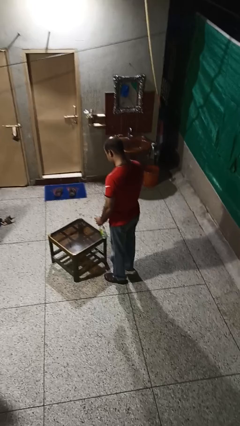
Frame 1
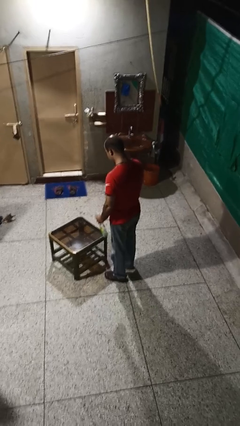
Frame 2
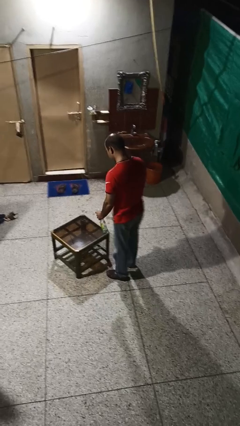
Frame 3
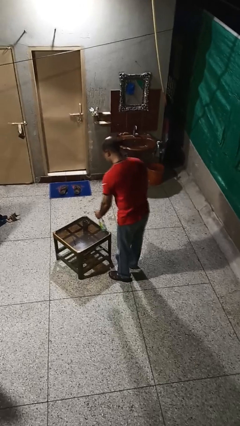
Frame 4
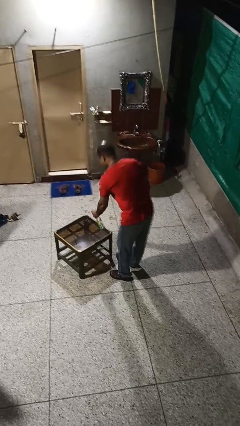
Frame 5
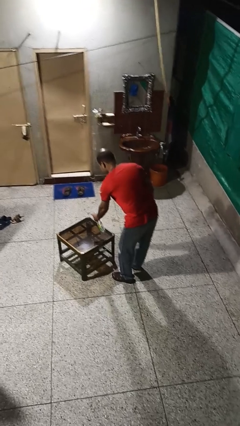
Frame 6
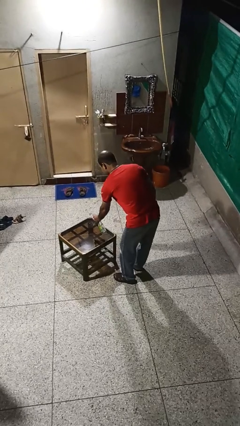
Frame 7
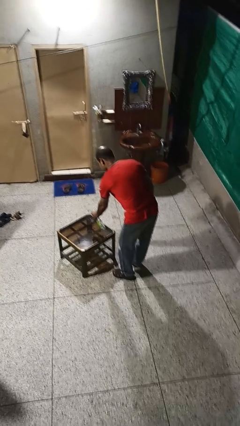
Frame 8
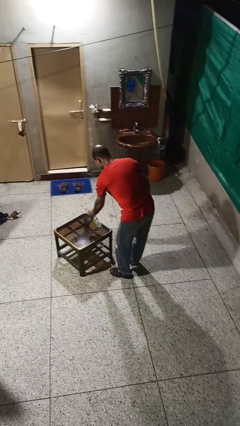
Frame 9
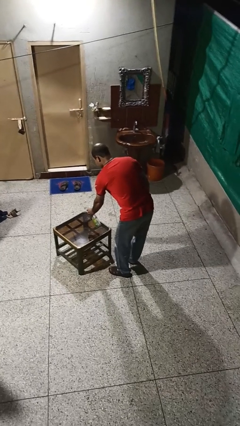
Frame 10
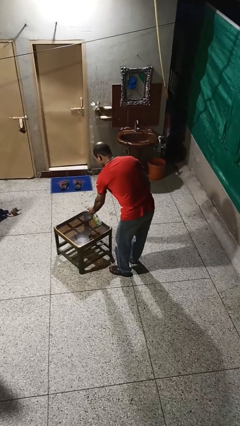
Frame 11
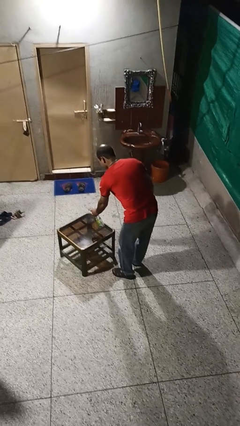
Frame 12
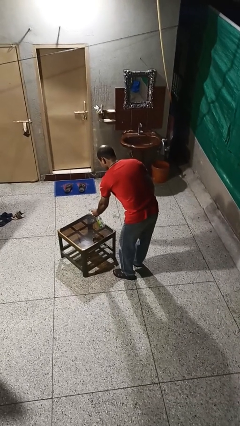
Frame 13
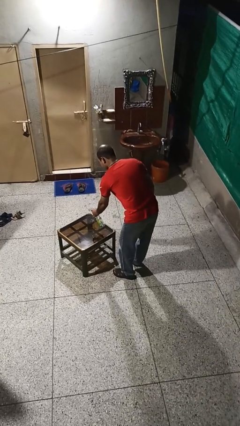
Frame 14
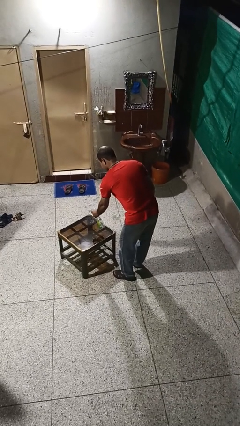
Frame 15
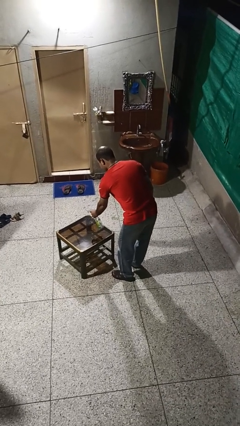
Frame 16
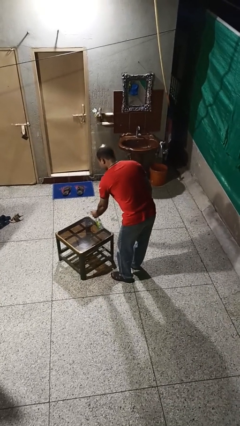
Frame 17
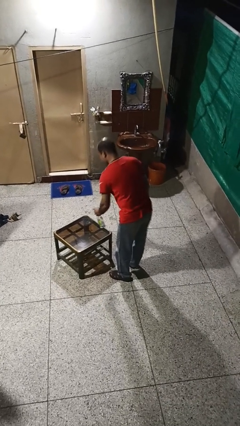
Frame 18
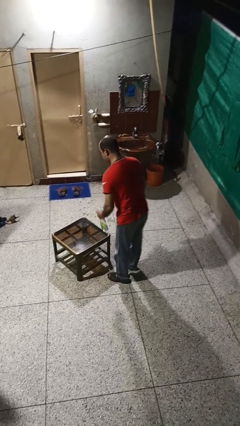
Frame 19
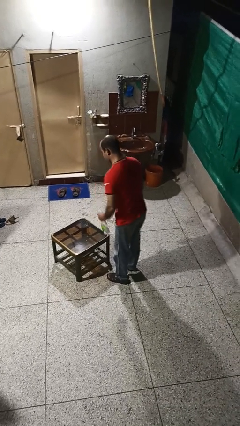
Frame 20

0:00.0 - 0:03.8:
person sprays from bottle

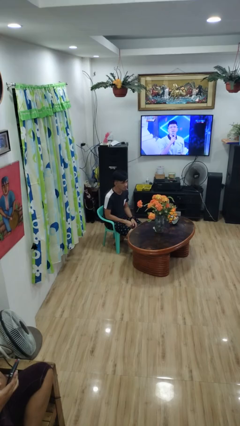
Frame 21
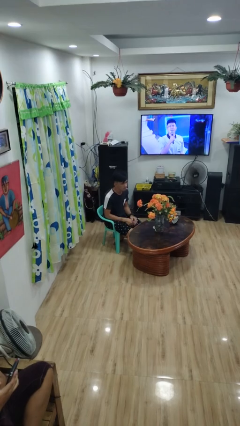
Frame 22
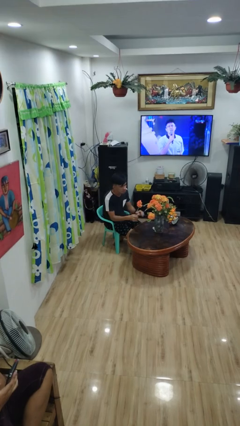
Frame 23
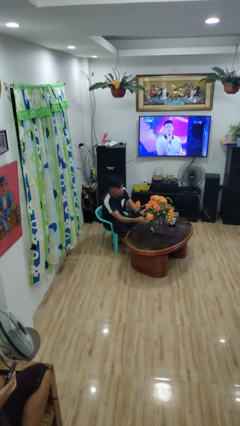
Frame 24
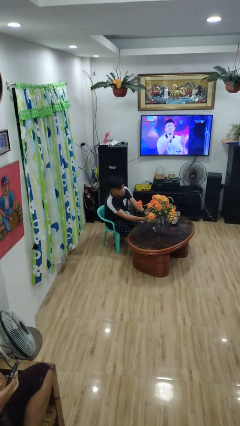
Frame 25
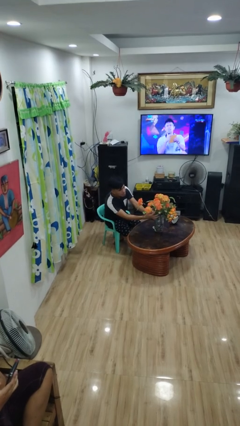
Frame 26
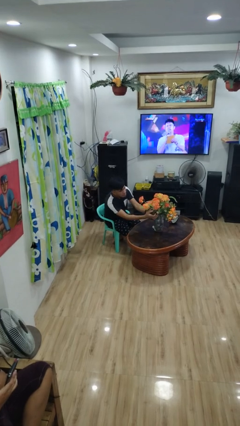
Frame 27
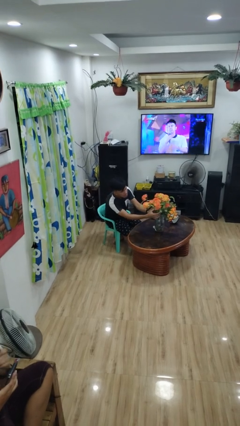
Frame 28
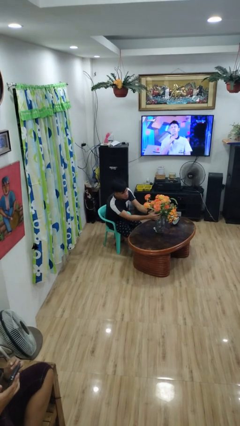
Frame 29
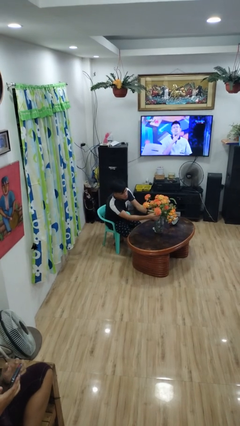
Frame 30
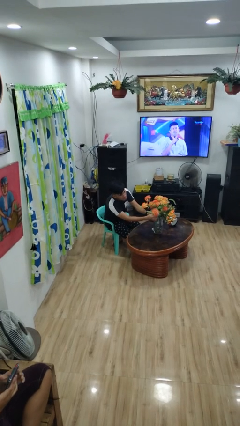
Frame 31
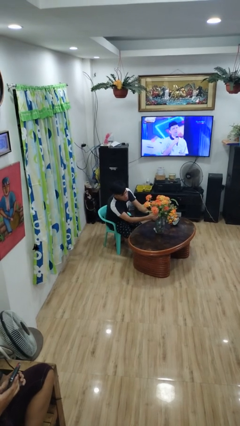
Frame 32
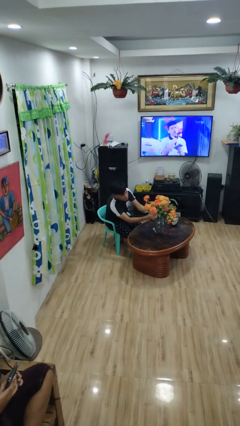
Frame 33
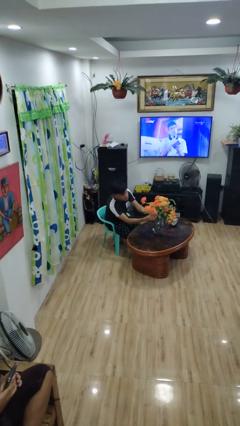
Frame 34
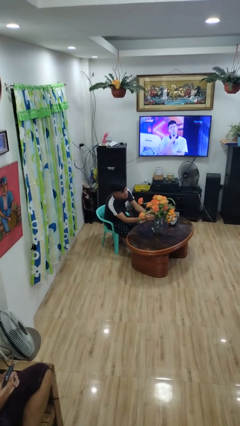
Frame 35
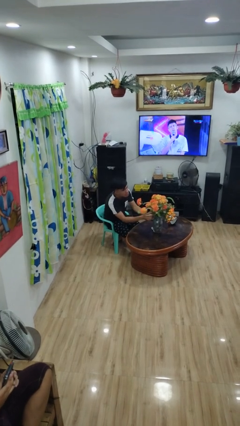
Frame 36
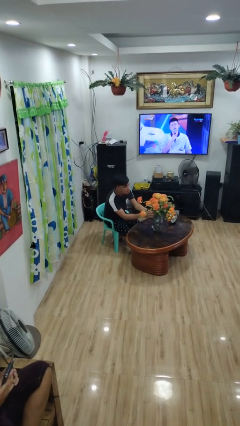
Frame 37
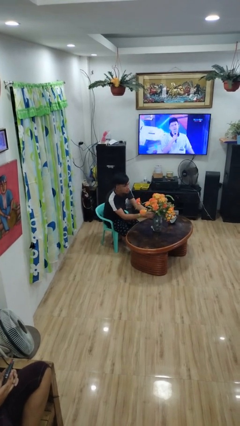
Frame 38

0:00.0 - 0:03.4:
person arranges flowers in vase

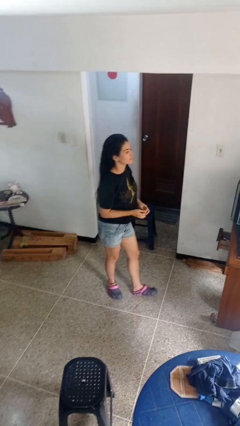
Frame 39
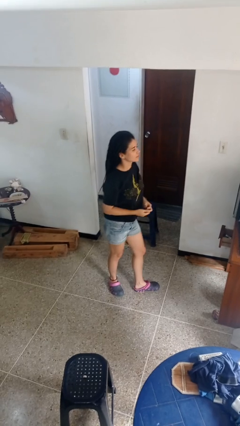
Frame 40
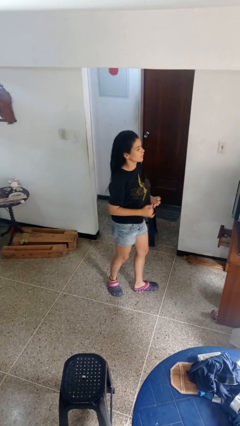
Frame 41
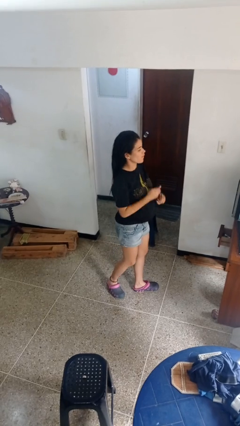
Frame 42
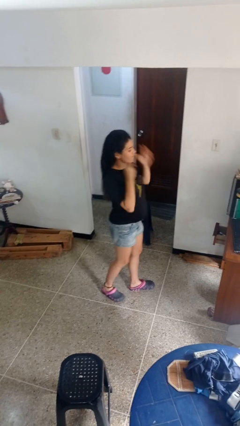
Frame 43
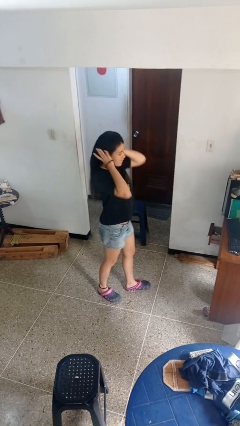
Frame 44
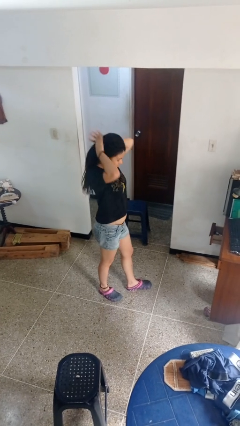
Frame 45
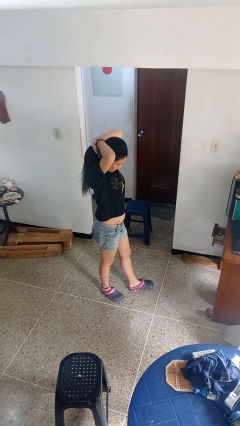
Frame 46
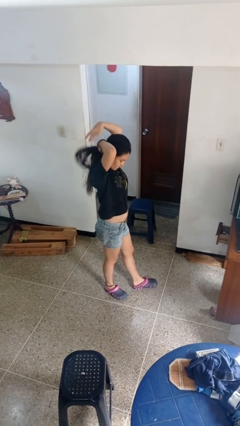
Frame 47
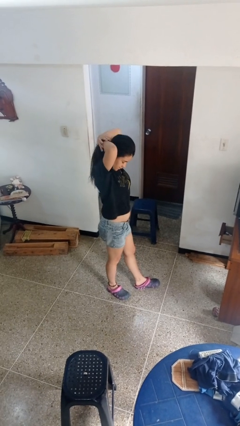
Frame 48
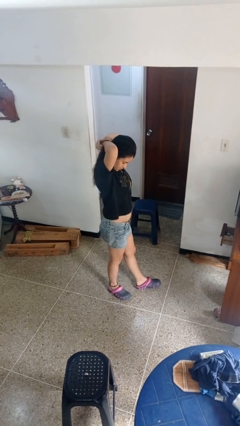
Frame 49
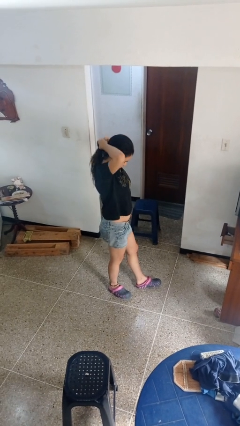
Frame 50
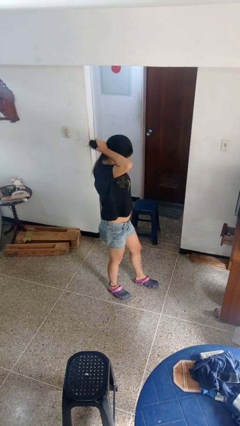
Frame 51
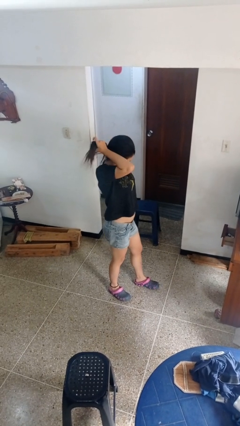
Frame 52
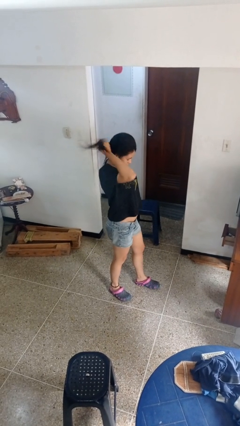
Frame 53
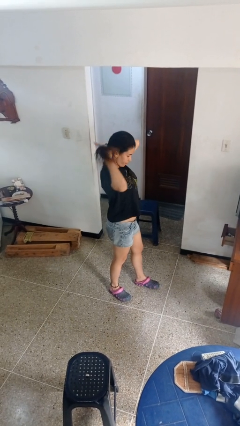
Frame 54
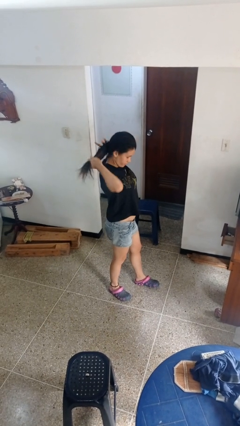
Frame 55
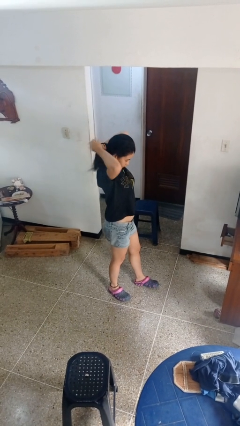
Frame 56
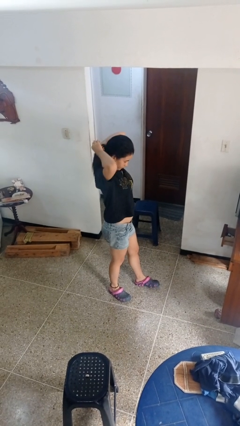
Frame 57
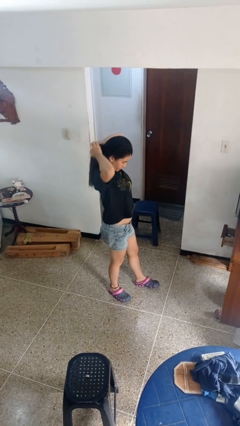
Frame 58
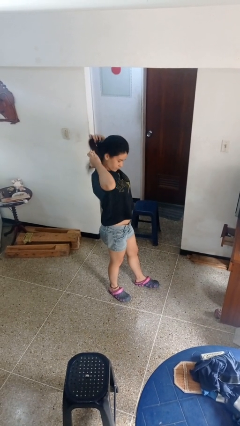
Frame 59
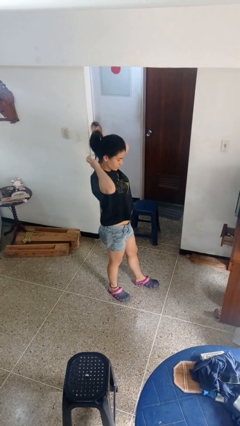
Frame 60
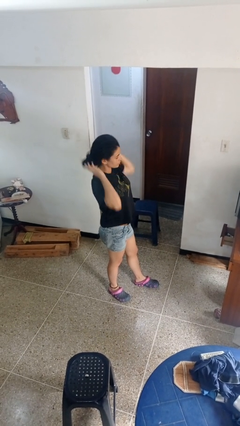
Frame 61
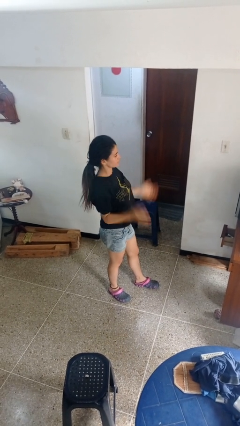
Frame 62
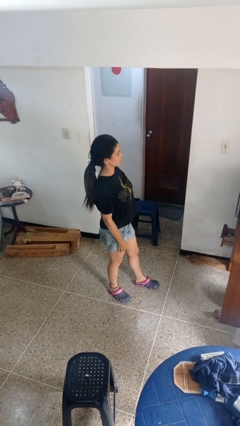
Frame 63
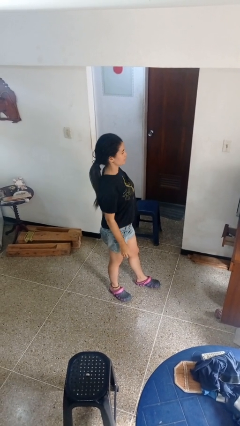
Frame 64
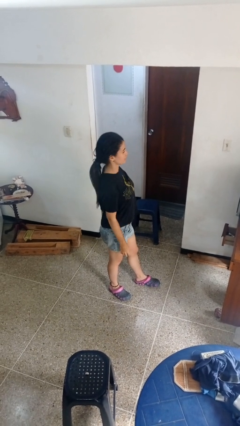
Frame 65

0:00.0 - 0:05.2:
person puts hair in ponytail

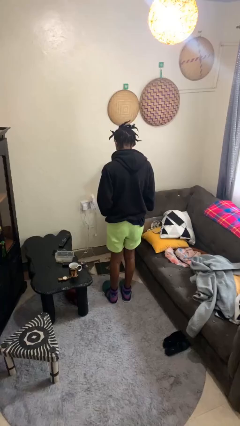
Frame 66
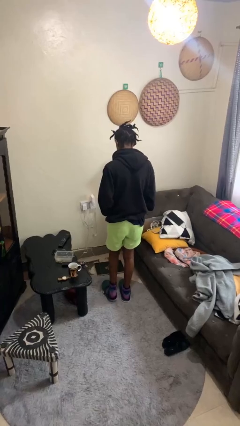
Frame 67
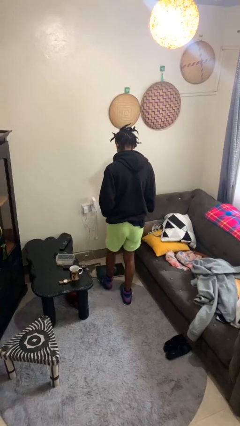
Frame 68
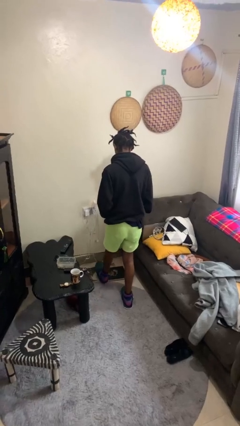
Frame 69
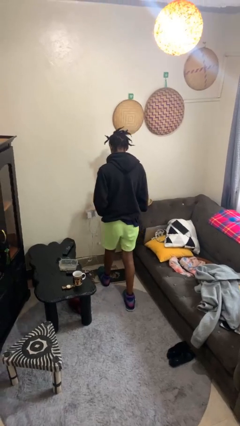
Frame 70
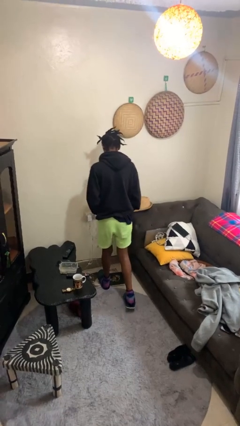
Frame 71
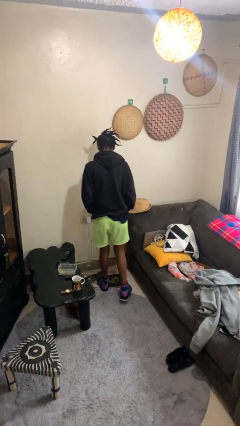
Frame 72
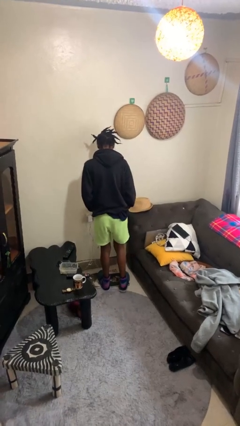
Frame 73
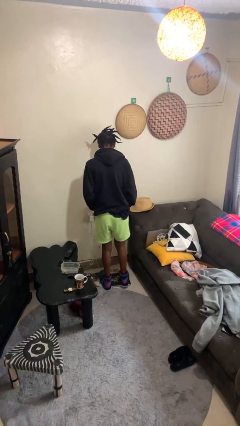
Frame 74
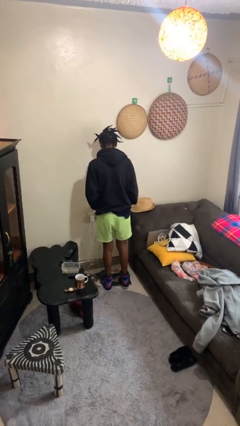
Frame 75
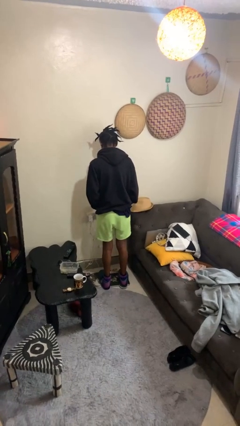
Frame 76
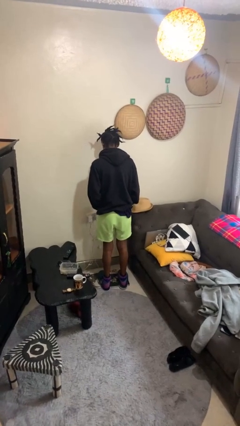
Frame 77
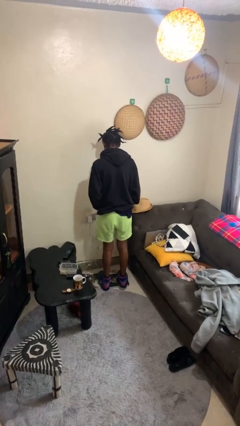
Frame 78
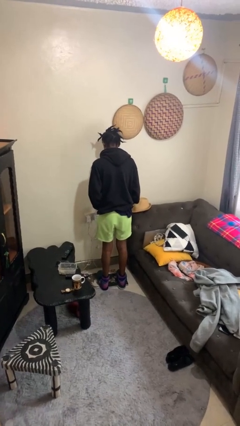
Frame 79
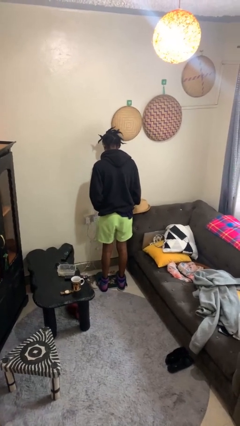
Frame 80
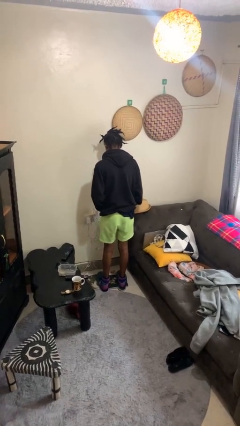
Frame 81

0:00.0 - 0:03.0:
person uses bodyweight scale

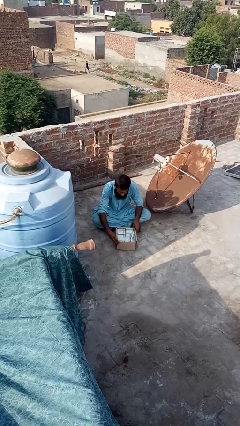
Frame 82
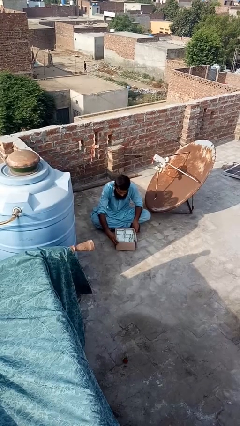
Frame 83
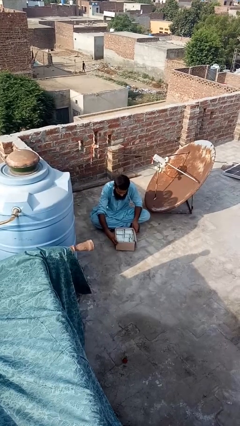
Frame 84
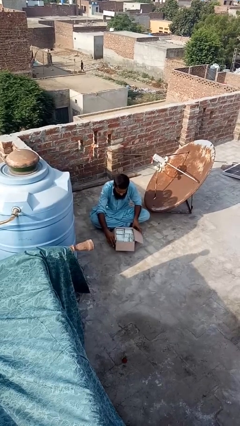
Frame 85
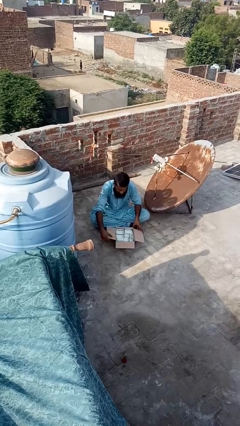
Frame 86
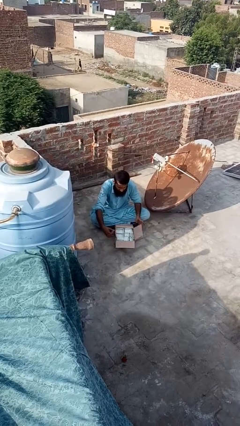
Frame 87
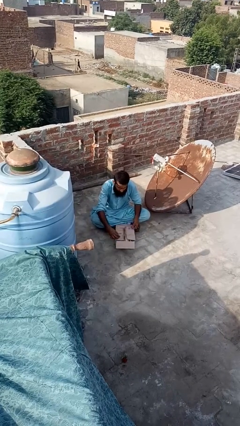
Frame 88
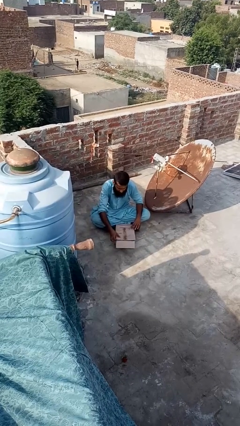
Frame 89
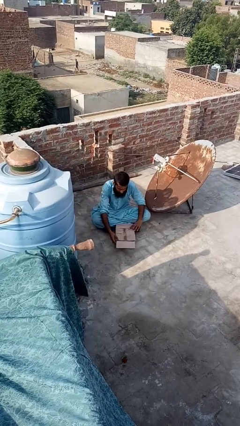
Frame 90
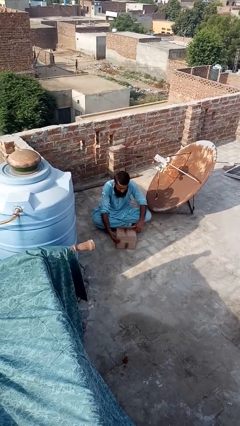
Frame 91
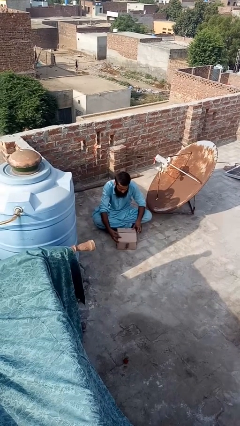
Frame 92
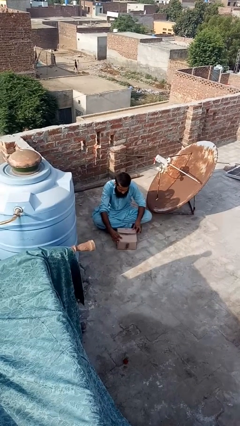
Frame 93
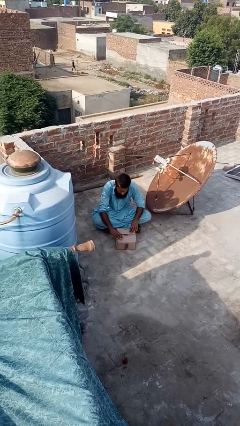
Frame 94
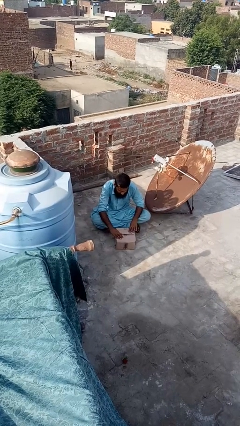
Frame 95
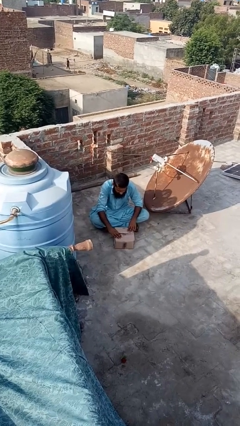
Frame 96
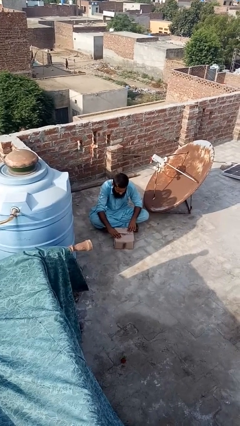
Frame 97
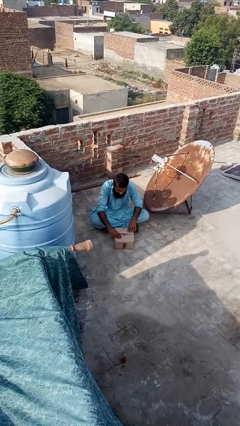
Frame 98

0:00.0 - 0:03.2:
person closes box
